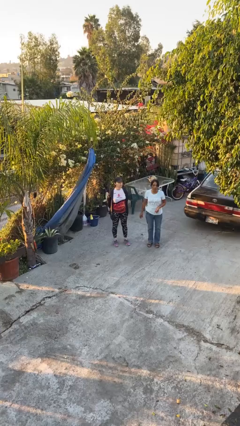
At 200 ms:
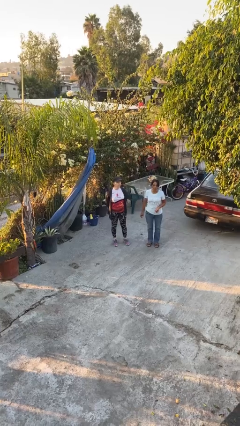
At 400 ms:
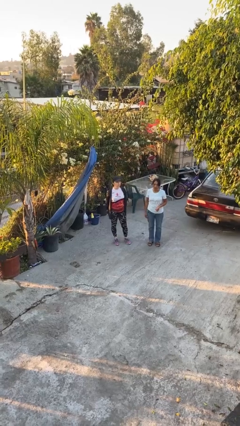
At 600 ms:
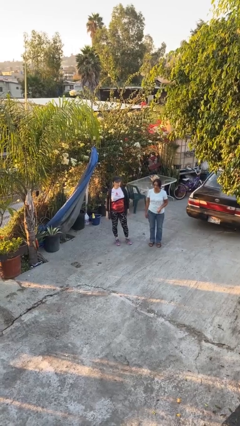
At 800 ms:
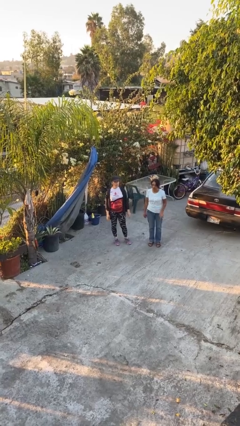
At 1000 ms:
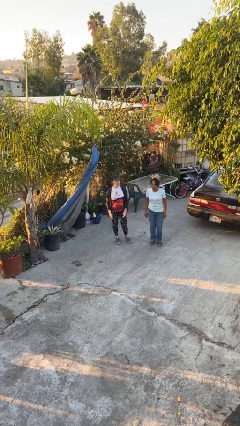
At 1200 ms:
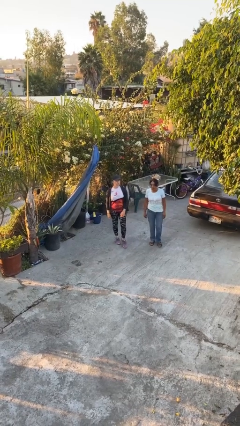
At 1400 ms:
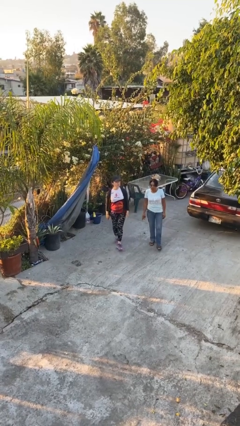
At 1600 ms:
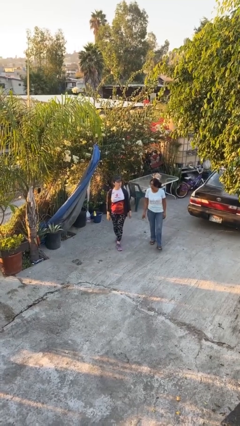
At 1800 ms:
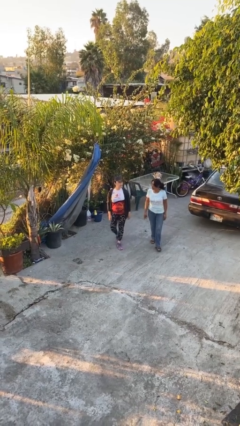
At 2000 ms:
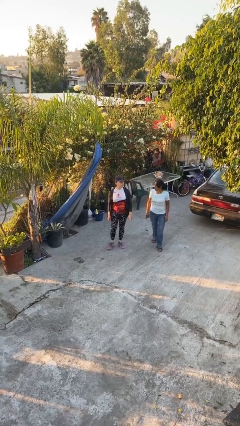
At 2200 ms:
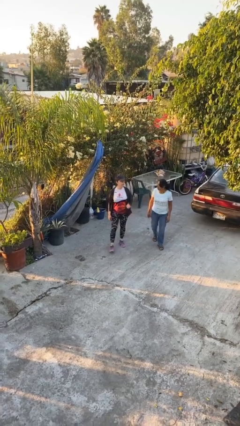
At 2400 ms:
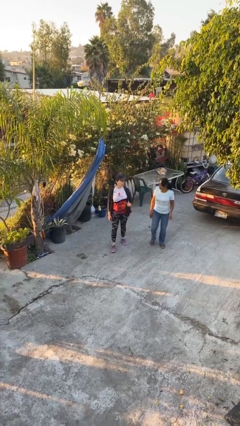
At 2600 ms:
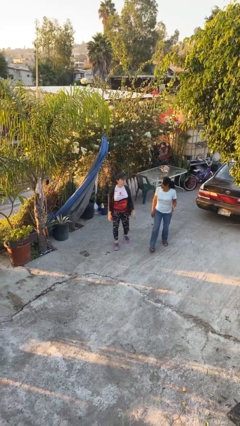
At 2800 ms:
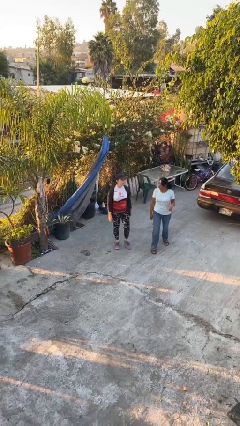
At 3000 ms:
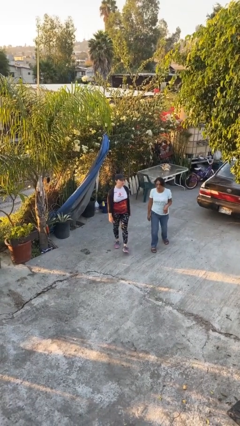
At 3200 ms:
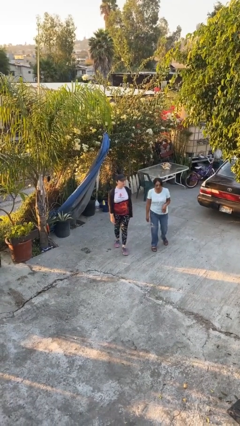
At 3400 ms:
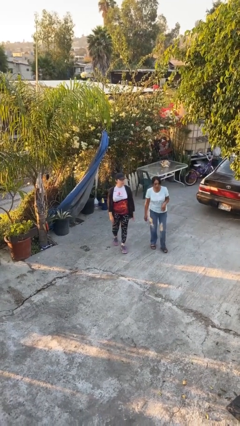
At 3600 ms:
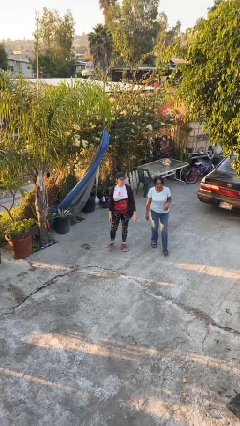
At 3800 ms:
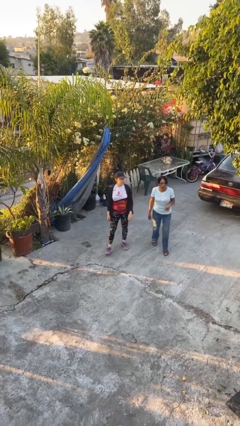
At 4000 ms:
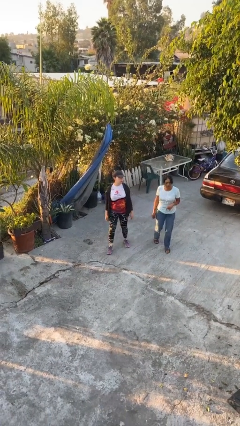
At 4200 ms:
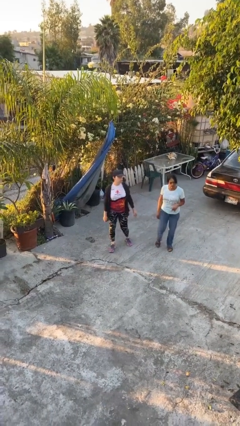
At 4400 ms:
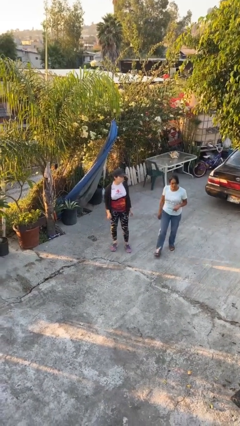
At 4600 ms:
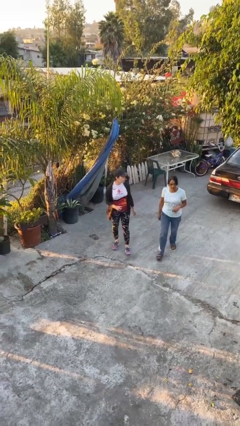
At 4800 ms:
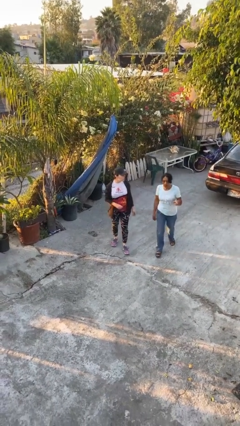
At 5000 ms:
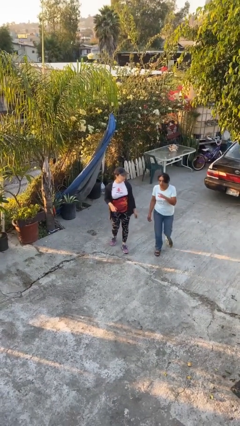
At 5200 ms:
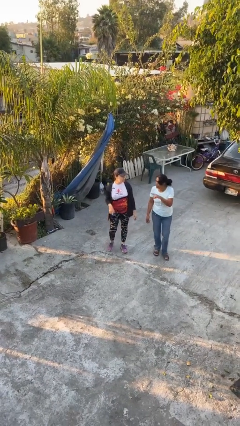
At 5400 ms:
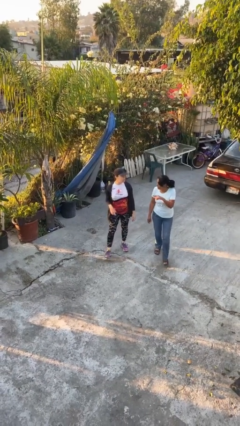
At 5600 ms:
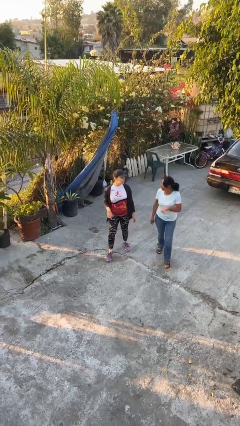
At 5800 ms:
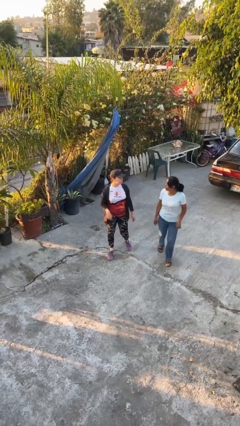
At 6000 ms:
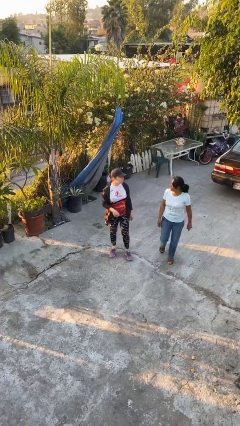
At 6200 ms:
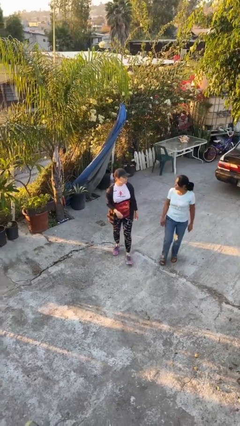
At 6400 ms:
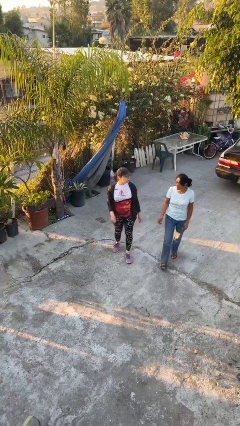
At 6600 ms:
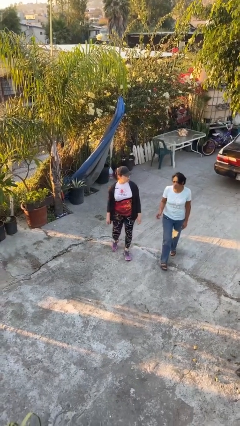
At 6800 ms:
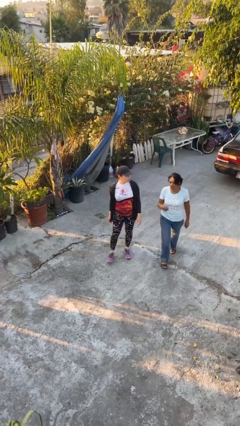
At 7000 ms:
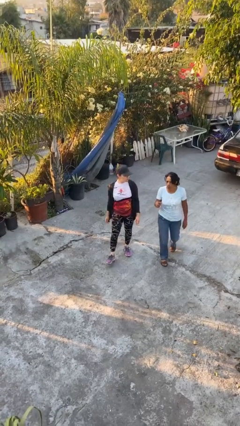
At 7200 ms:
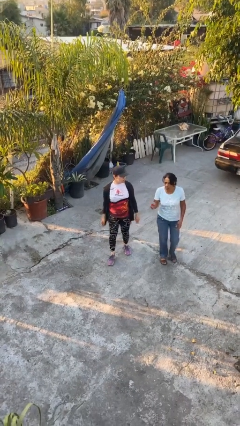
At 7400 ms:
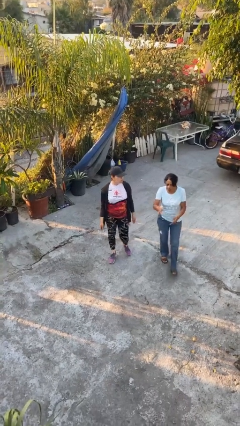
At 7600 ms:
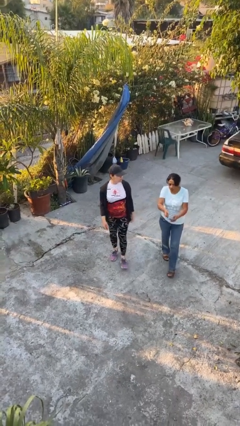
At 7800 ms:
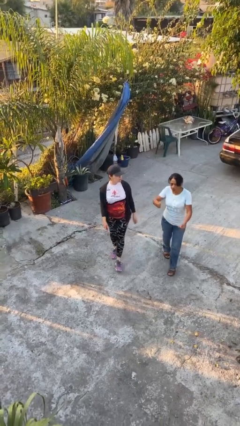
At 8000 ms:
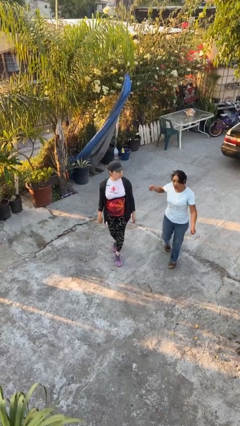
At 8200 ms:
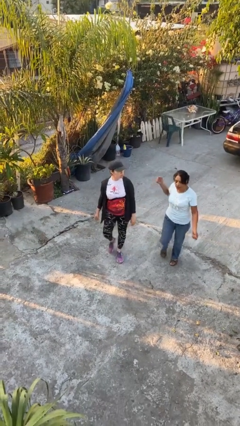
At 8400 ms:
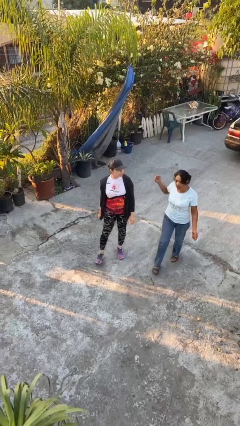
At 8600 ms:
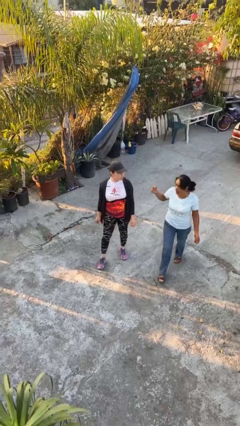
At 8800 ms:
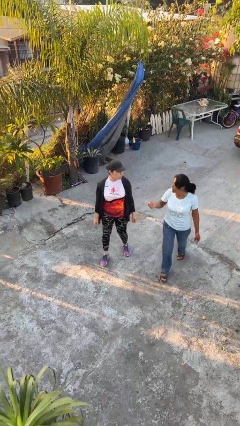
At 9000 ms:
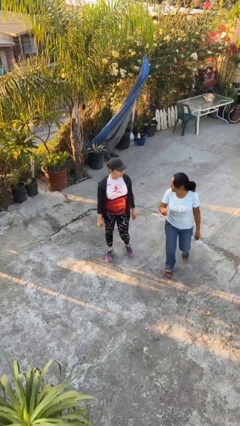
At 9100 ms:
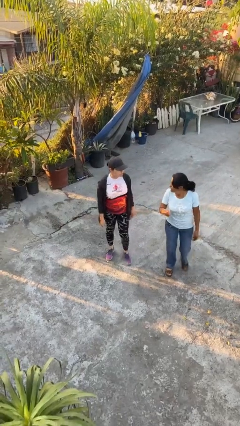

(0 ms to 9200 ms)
person talks to person

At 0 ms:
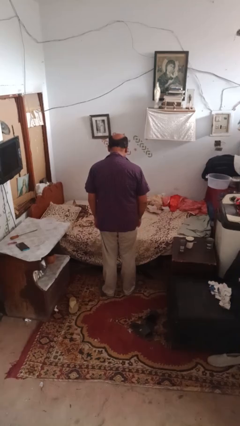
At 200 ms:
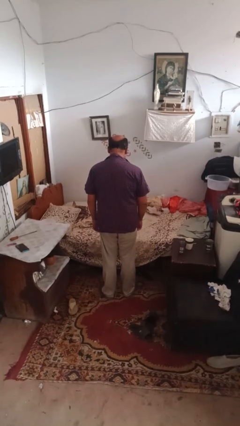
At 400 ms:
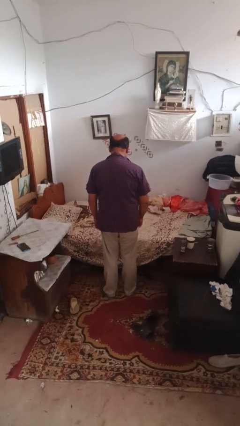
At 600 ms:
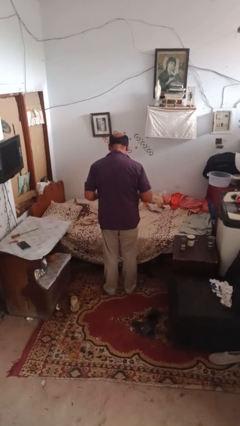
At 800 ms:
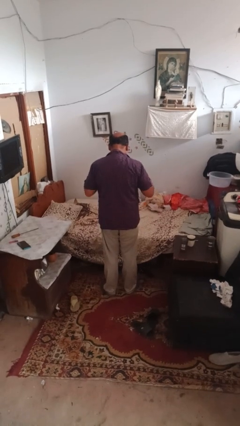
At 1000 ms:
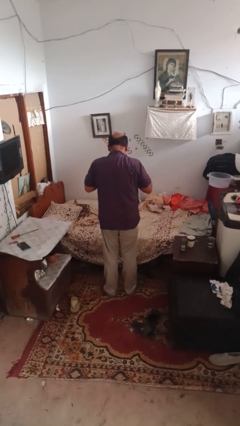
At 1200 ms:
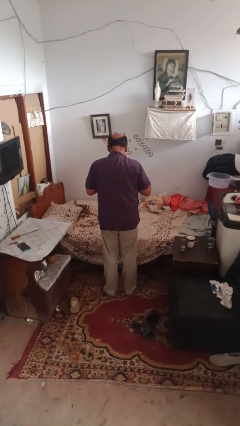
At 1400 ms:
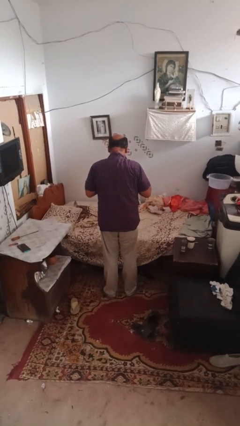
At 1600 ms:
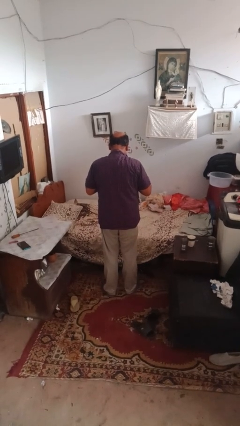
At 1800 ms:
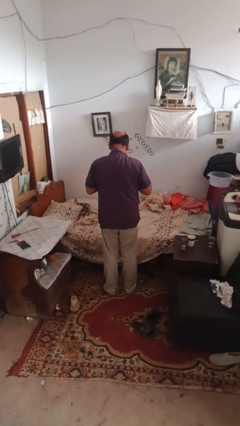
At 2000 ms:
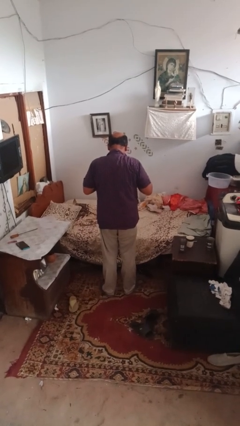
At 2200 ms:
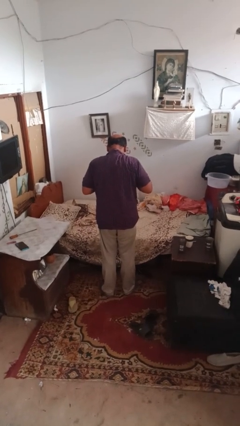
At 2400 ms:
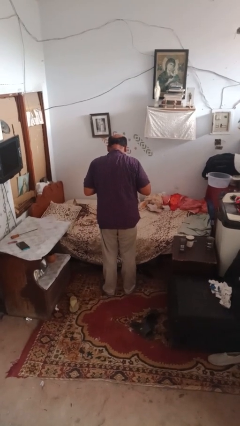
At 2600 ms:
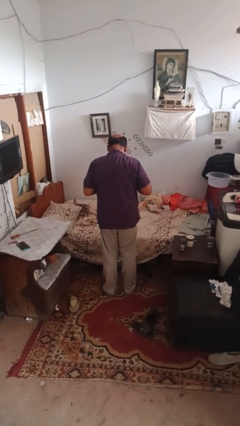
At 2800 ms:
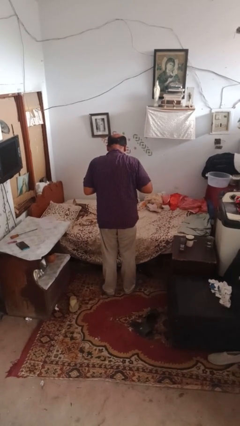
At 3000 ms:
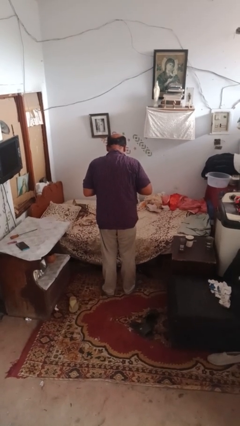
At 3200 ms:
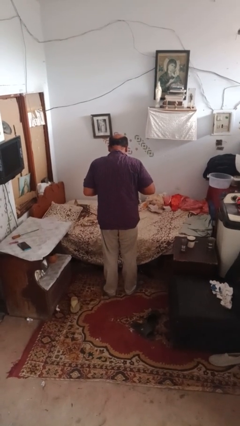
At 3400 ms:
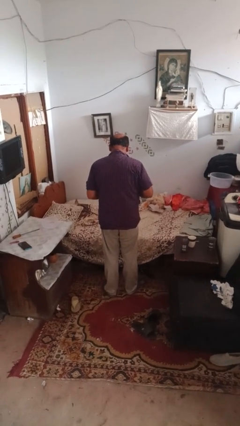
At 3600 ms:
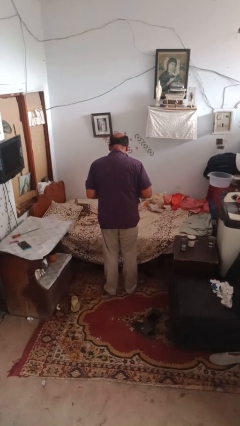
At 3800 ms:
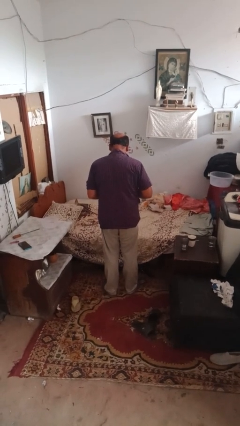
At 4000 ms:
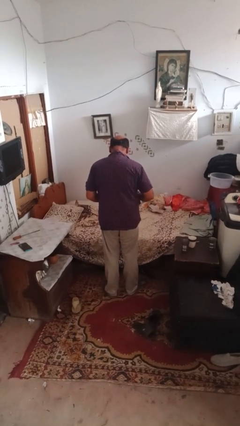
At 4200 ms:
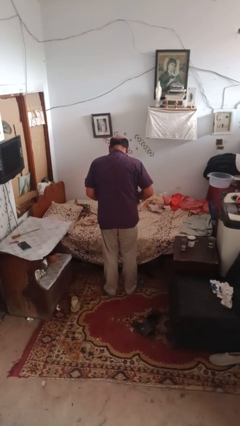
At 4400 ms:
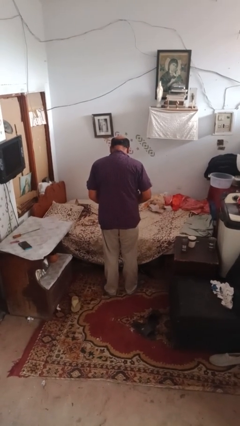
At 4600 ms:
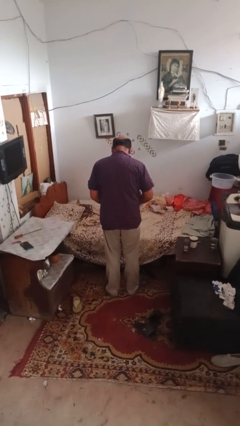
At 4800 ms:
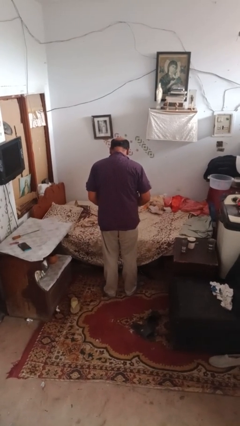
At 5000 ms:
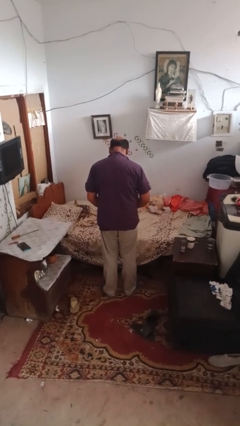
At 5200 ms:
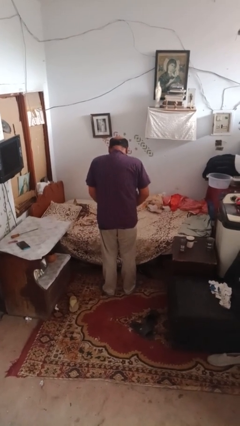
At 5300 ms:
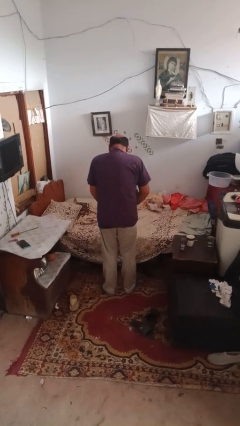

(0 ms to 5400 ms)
person buttons shirt

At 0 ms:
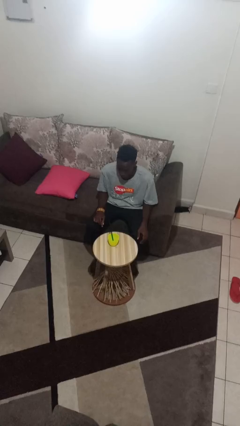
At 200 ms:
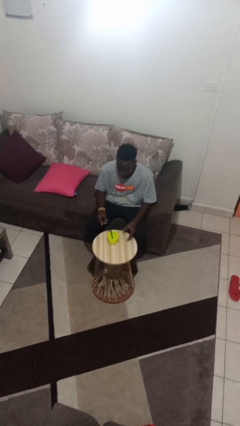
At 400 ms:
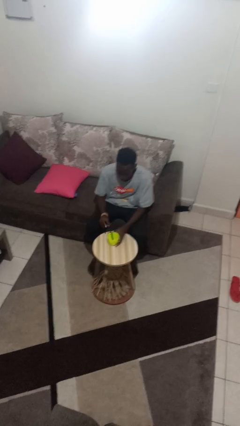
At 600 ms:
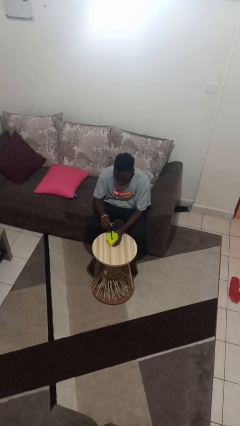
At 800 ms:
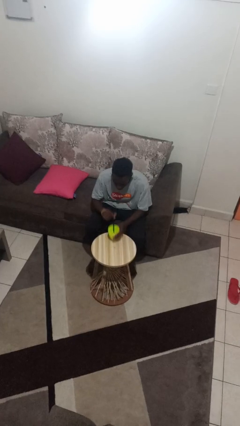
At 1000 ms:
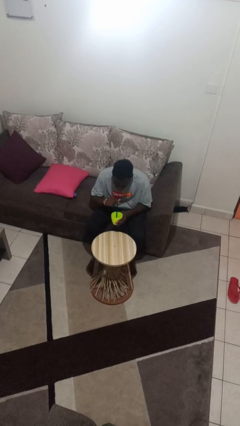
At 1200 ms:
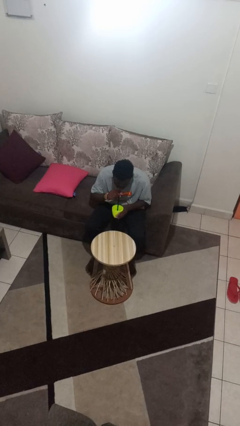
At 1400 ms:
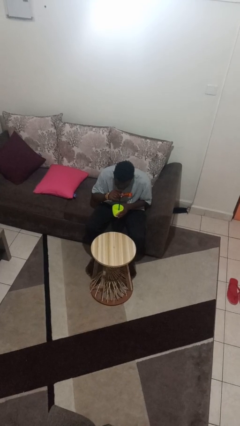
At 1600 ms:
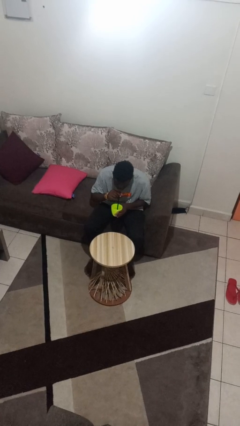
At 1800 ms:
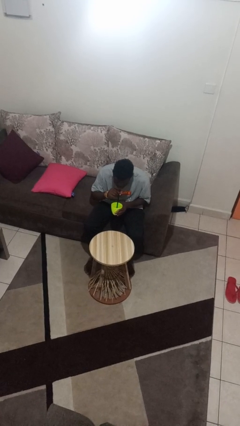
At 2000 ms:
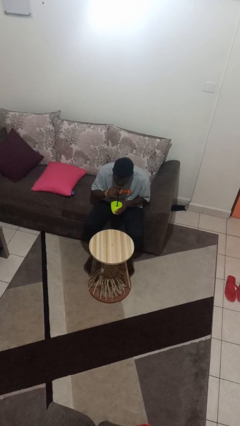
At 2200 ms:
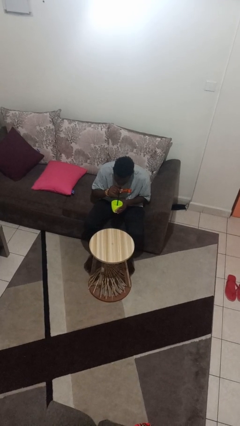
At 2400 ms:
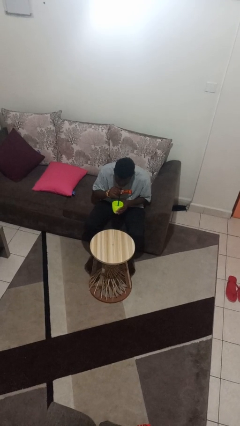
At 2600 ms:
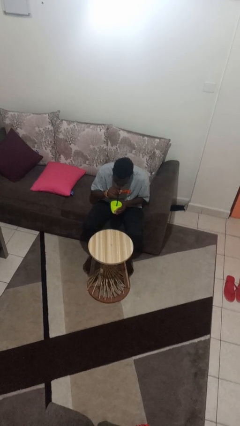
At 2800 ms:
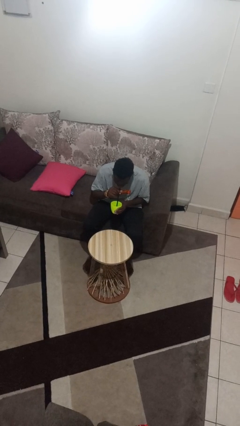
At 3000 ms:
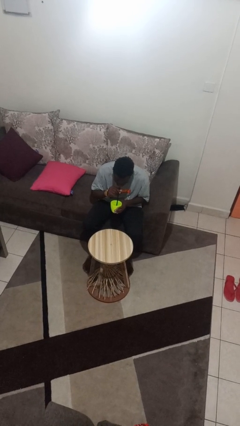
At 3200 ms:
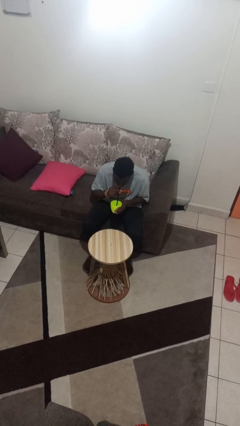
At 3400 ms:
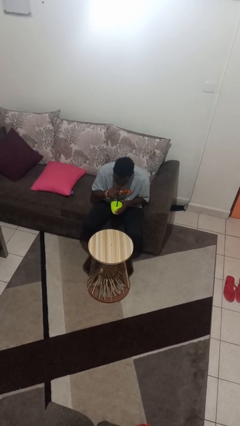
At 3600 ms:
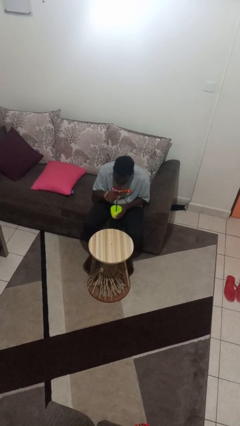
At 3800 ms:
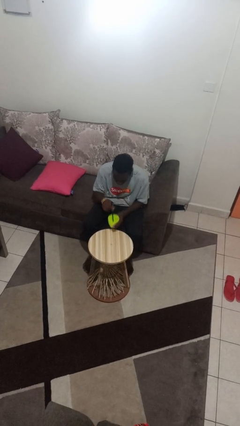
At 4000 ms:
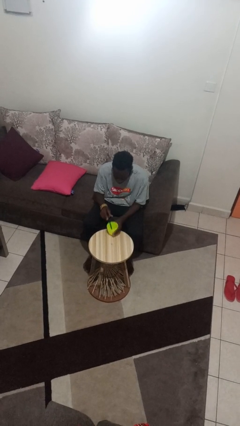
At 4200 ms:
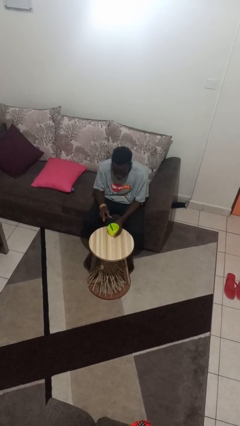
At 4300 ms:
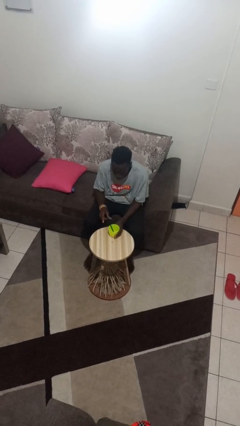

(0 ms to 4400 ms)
person drinks from straw
